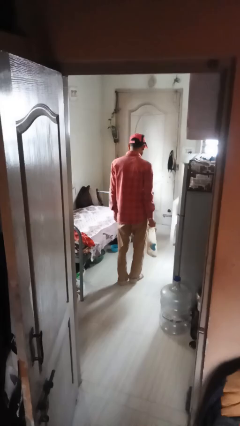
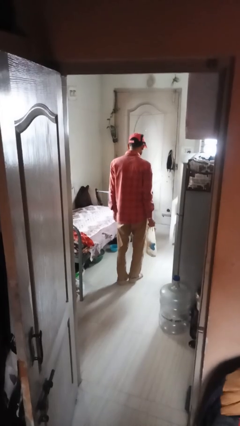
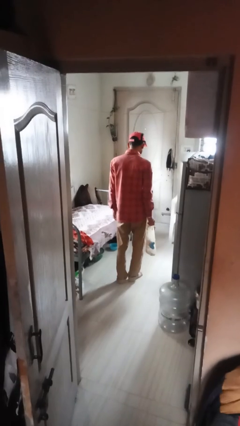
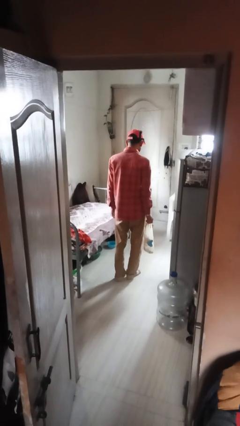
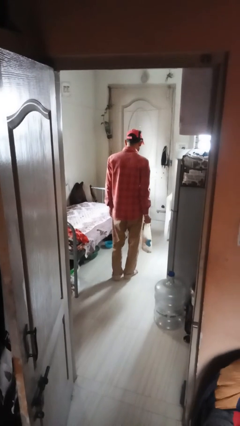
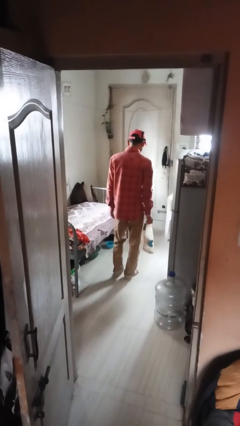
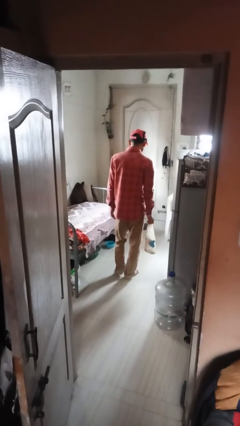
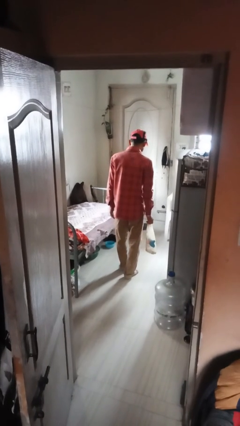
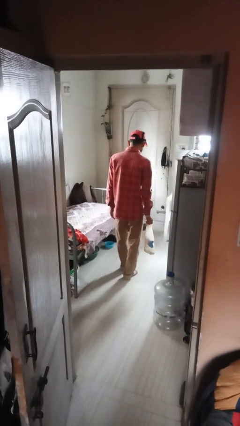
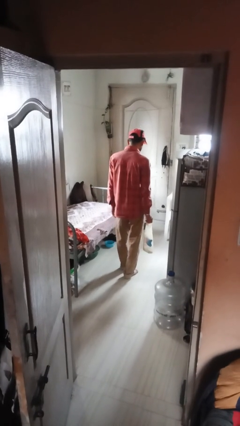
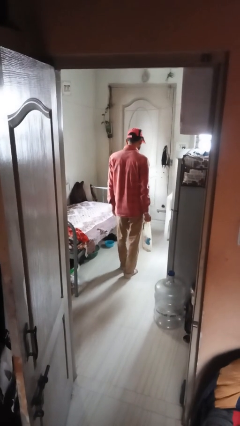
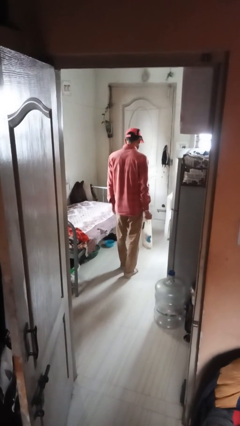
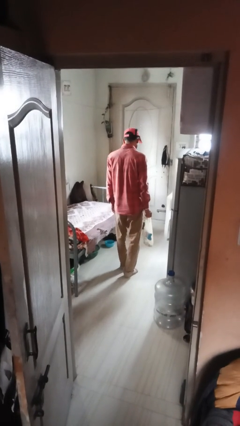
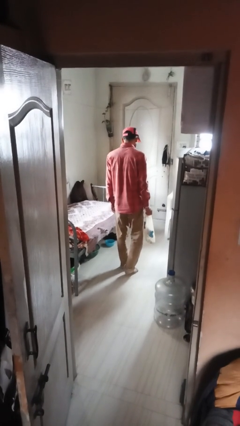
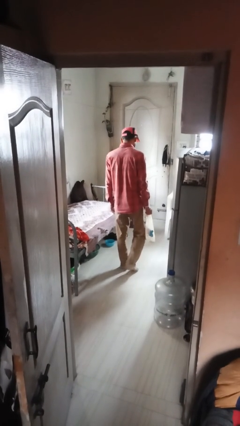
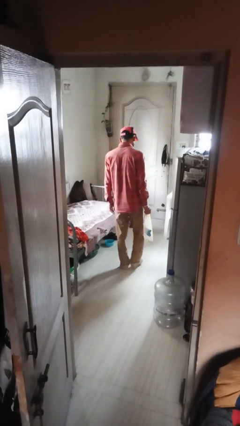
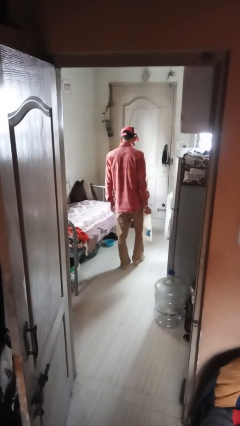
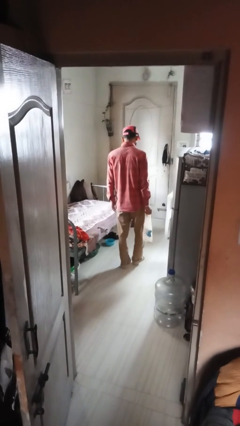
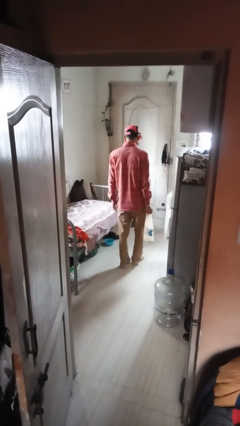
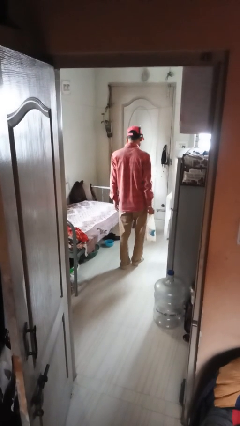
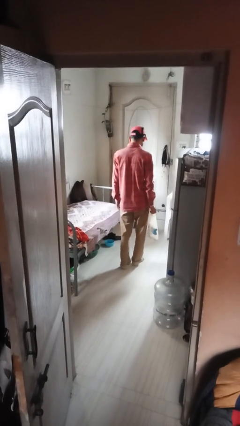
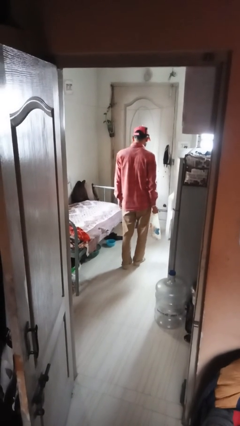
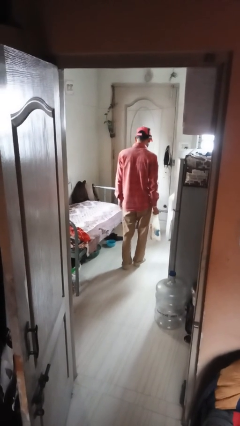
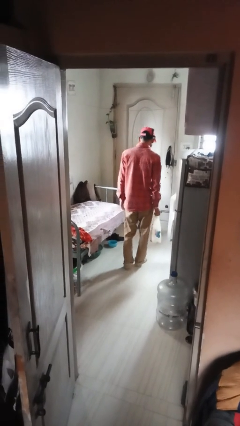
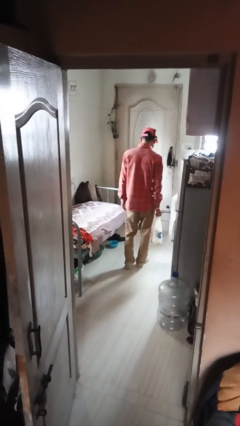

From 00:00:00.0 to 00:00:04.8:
person carries groceries

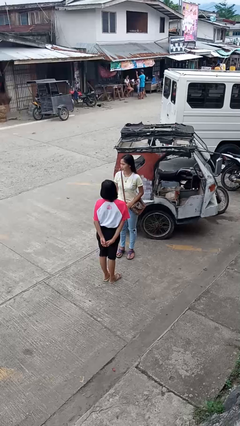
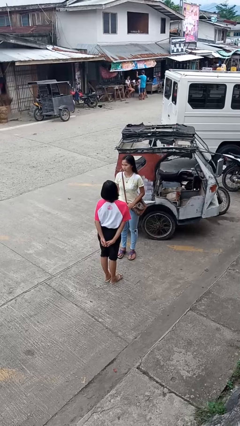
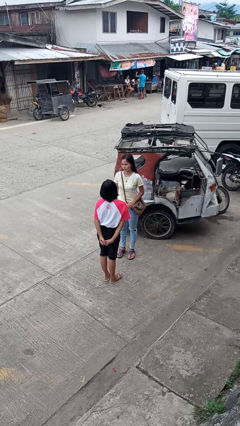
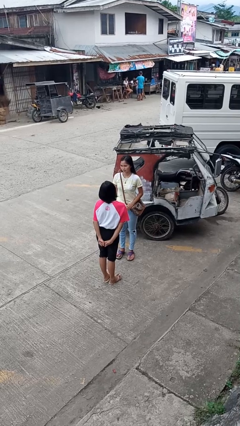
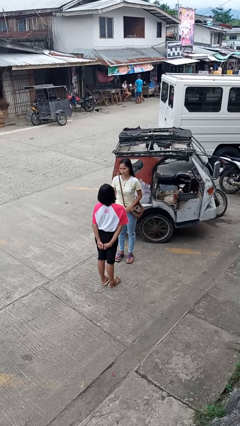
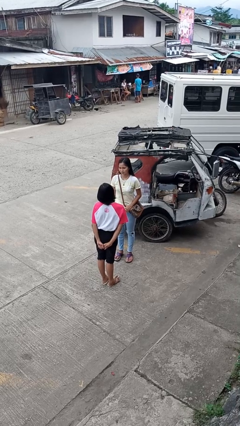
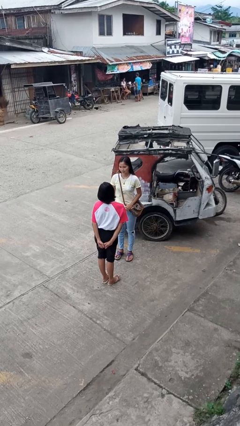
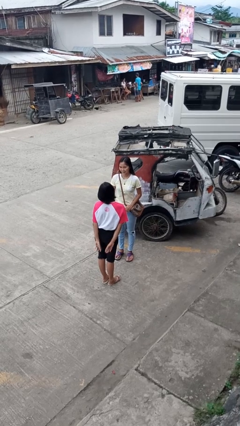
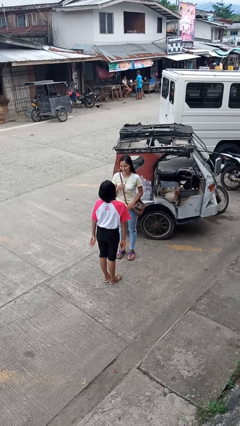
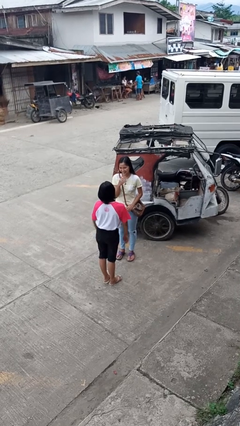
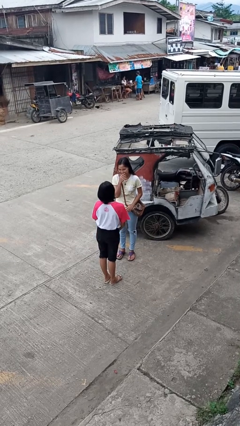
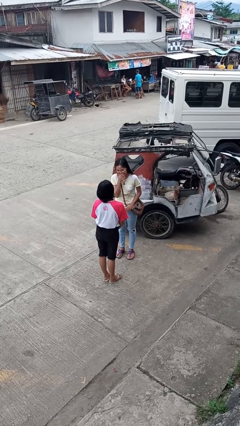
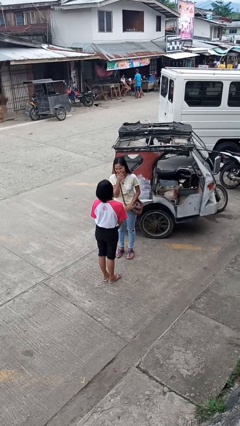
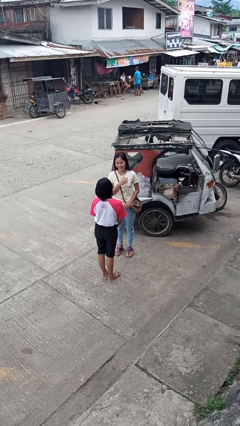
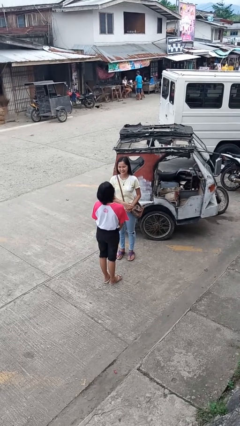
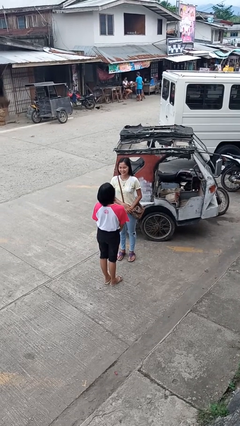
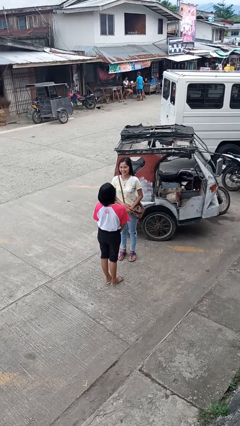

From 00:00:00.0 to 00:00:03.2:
person laughs with person

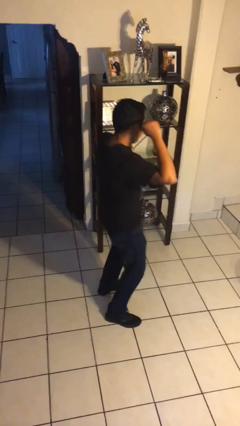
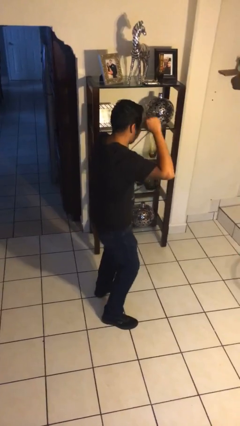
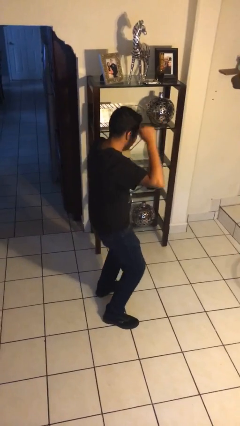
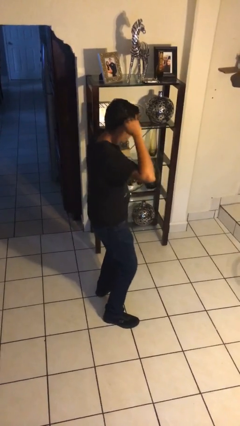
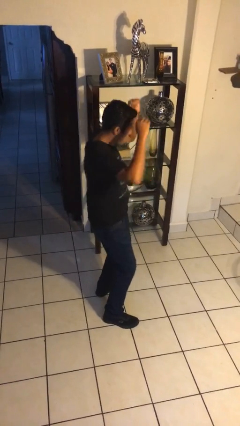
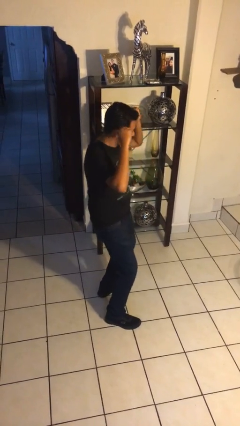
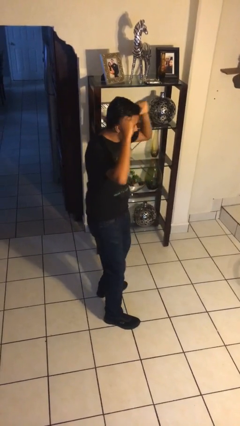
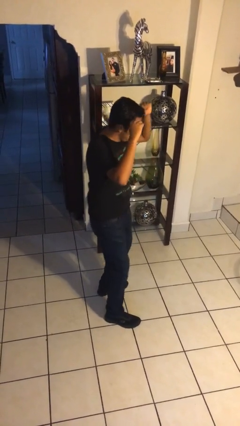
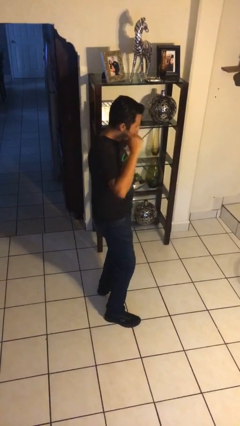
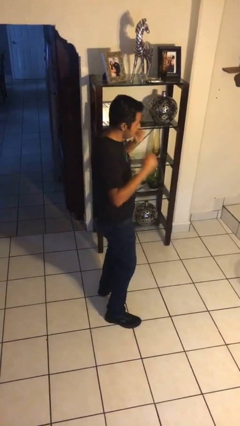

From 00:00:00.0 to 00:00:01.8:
person dances in place

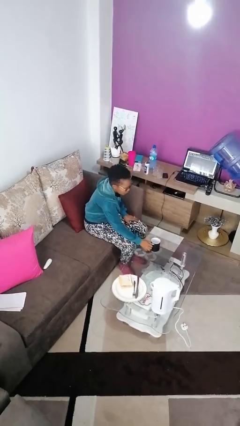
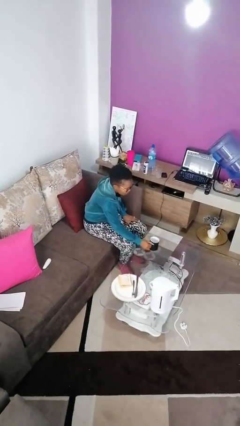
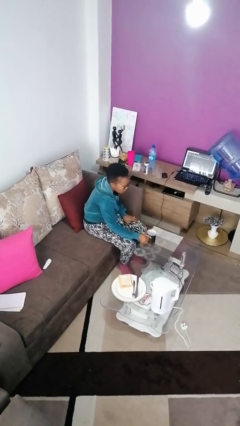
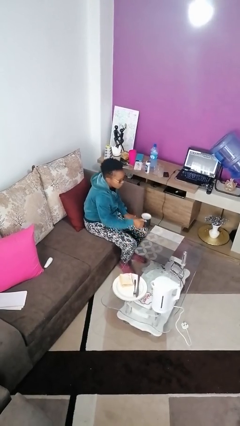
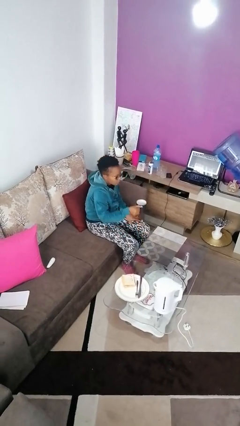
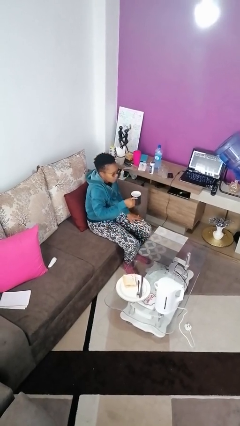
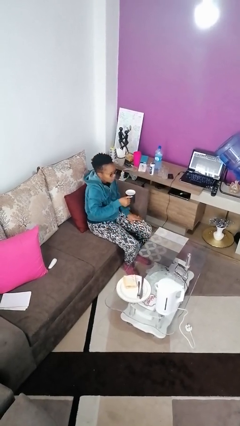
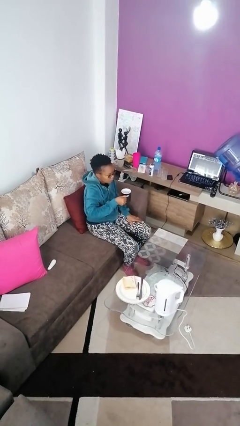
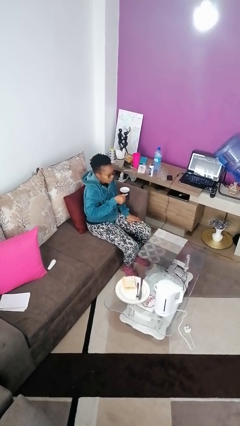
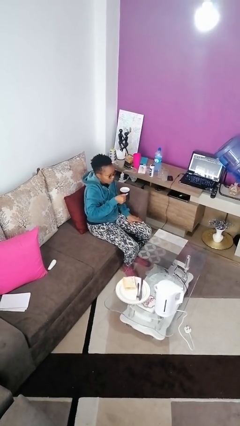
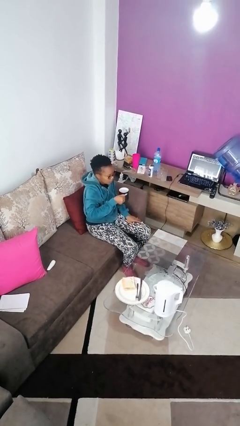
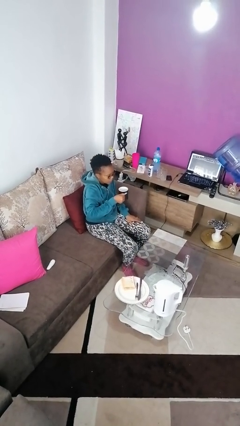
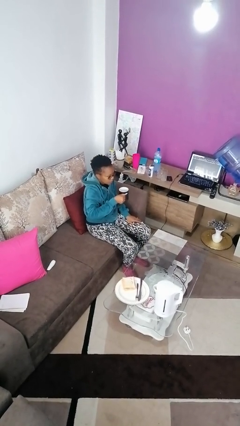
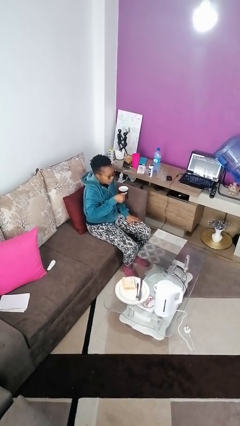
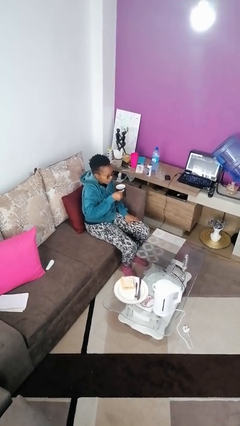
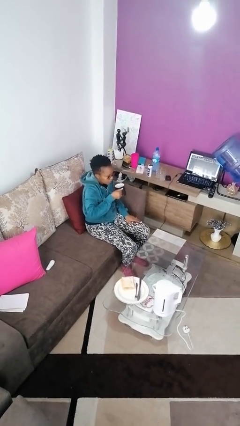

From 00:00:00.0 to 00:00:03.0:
person picks up object from table

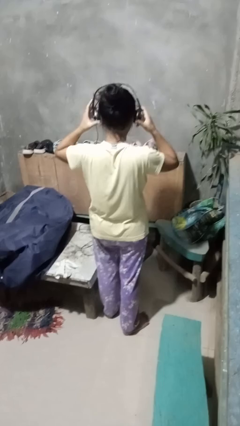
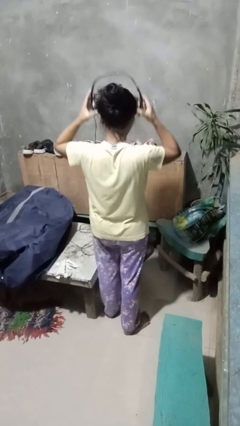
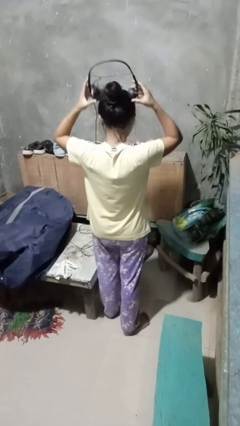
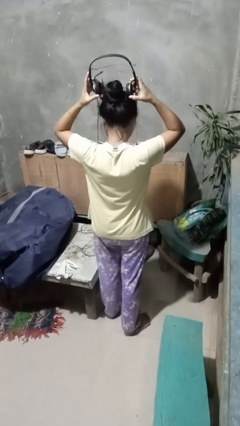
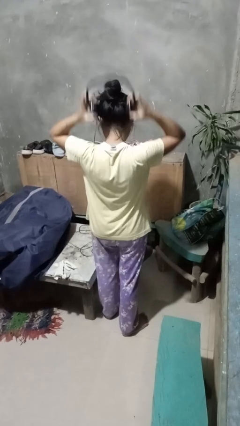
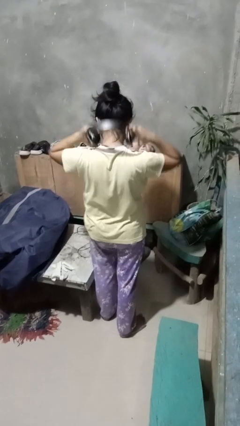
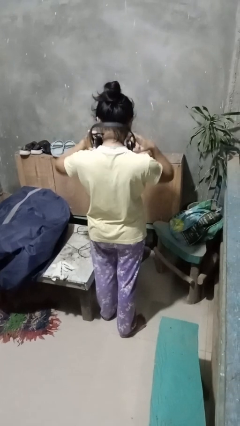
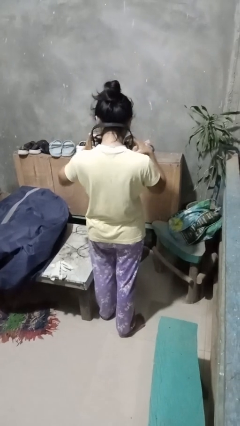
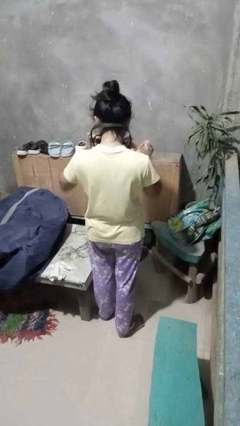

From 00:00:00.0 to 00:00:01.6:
person takes off headphones

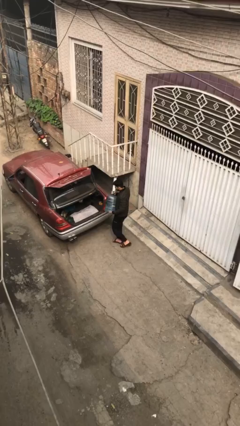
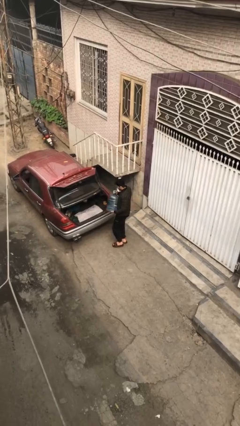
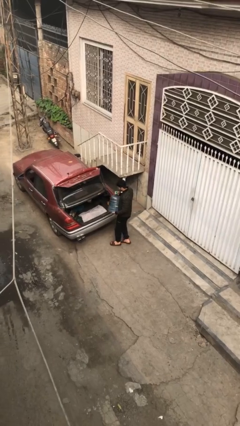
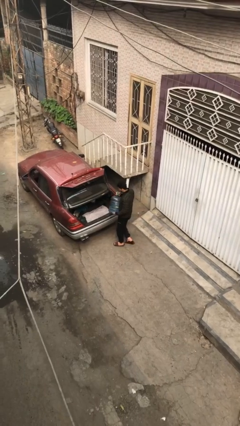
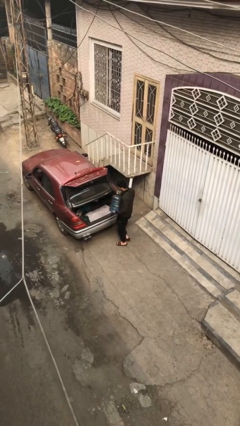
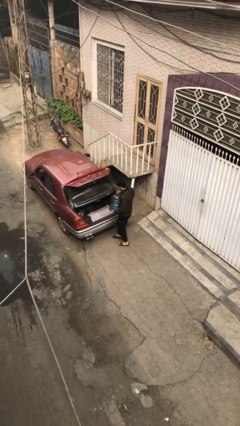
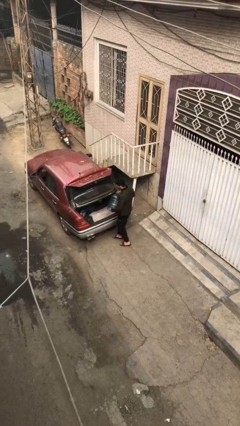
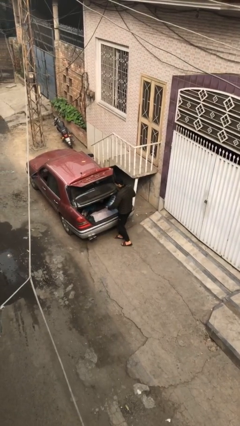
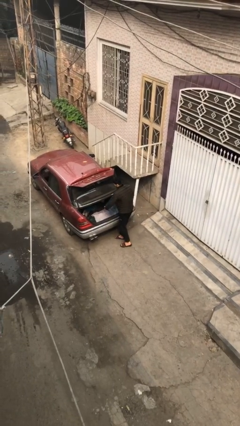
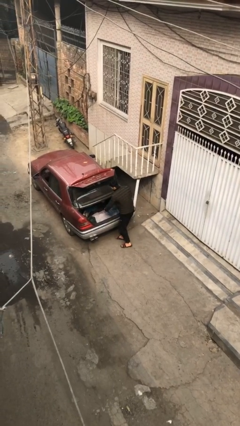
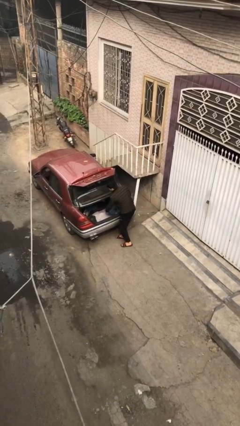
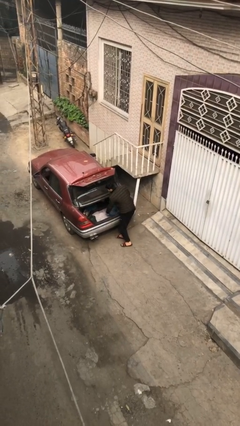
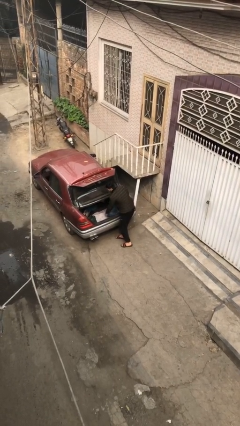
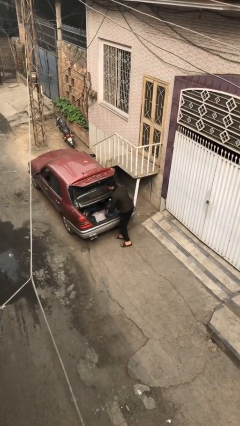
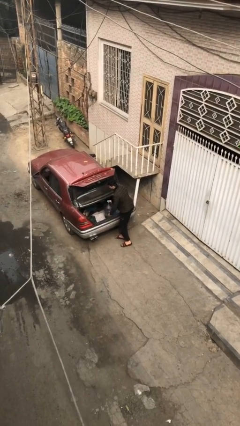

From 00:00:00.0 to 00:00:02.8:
person loads car
